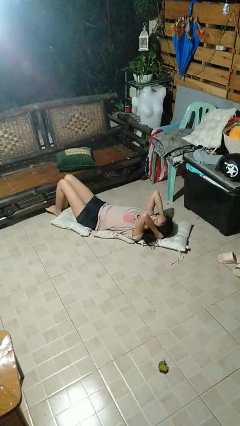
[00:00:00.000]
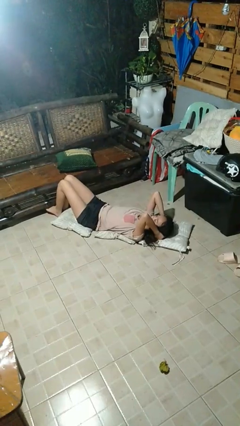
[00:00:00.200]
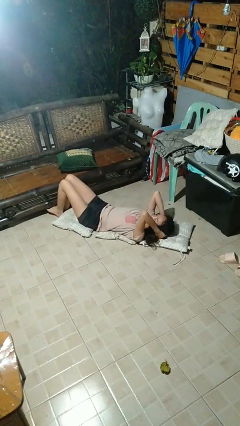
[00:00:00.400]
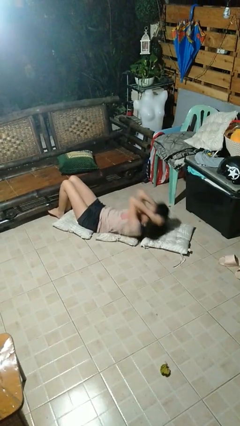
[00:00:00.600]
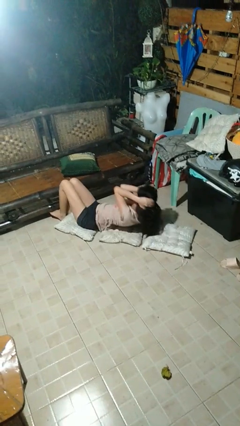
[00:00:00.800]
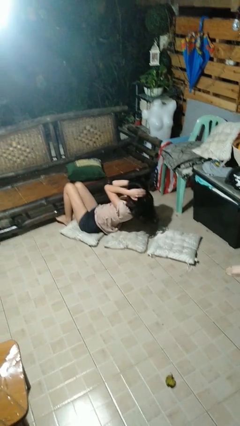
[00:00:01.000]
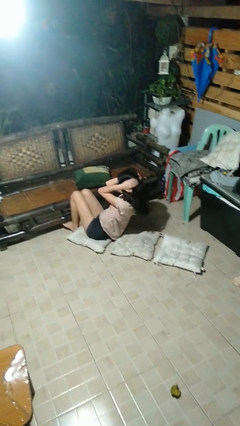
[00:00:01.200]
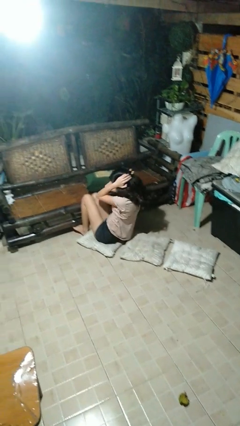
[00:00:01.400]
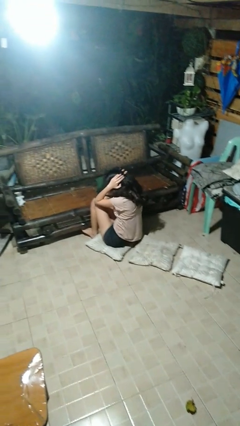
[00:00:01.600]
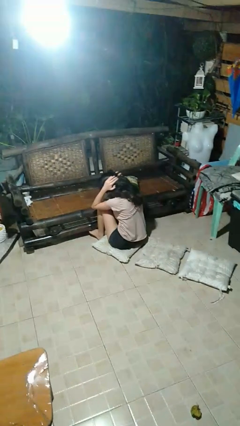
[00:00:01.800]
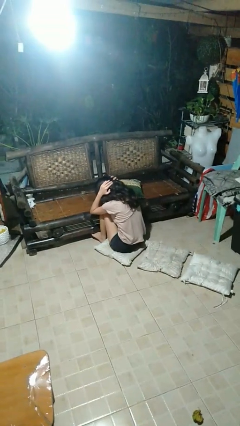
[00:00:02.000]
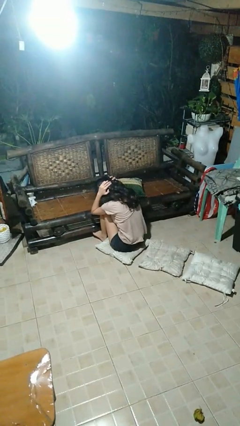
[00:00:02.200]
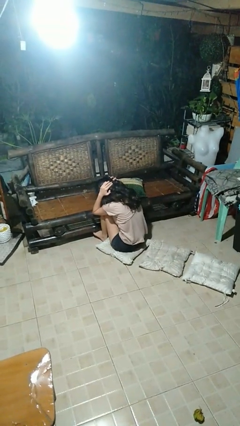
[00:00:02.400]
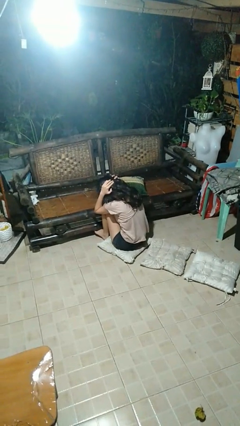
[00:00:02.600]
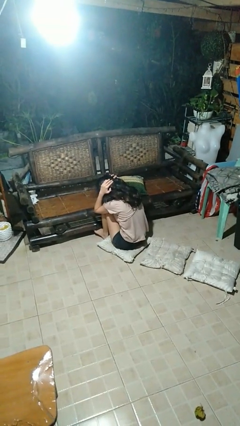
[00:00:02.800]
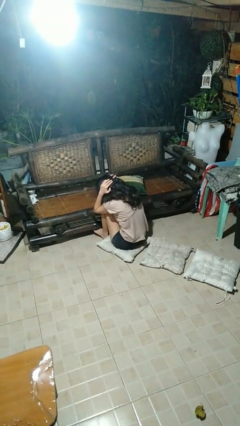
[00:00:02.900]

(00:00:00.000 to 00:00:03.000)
person exercises with situp

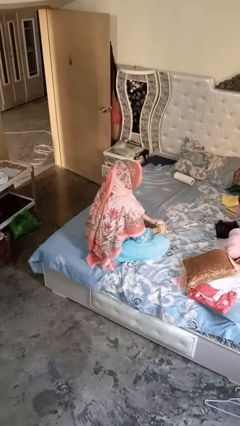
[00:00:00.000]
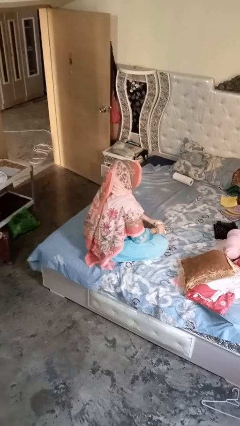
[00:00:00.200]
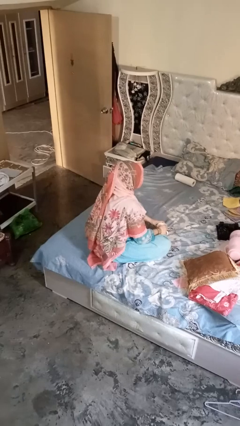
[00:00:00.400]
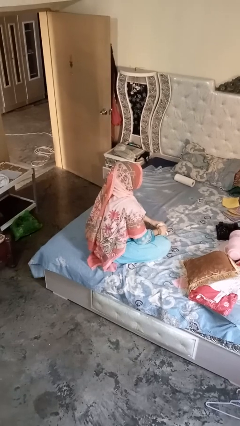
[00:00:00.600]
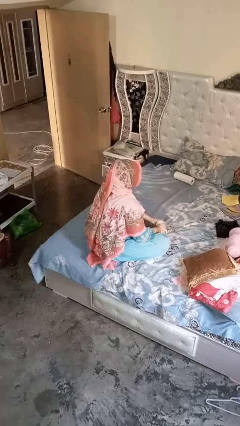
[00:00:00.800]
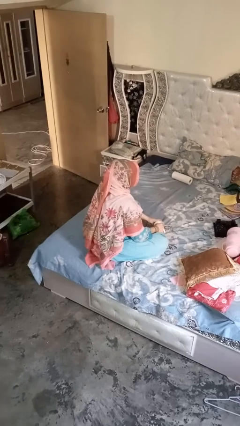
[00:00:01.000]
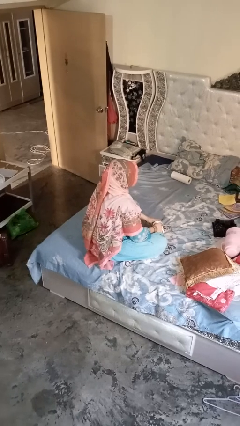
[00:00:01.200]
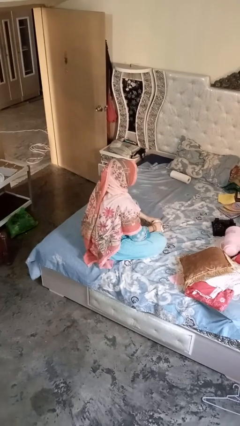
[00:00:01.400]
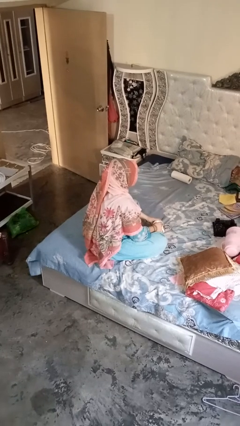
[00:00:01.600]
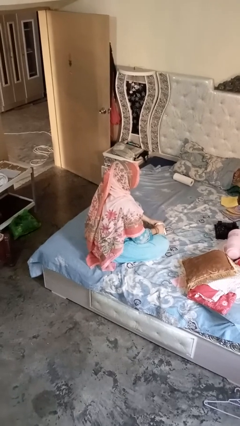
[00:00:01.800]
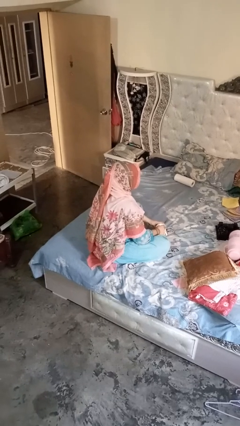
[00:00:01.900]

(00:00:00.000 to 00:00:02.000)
person stirs mug

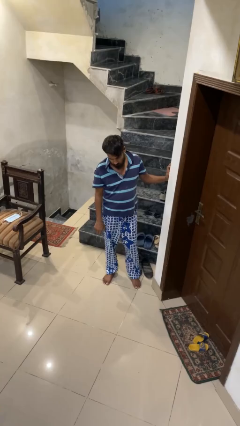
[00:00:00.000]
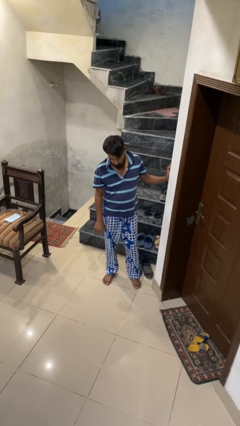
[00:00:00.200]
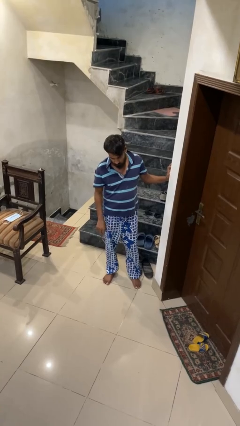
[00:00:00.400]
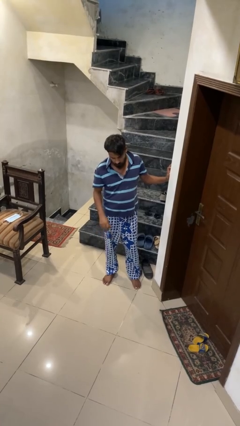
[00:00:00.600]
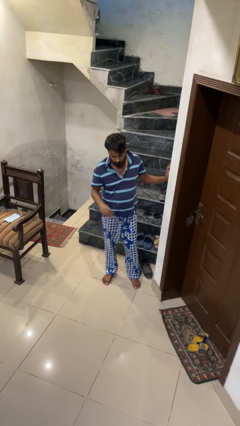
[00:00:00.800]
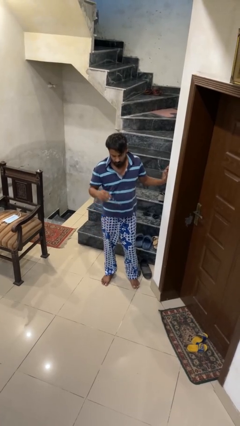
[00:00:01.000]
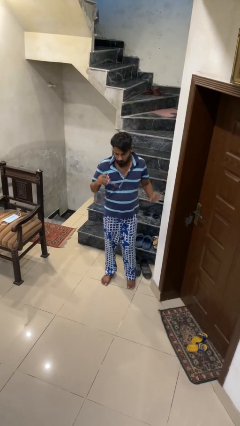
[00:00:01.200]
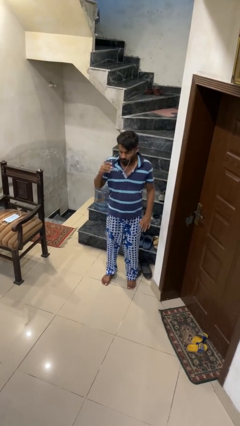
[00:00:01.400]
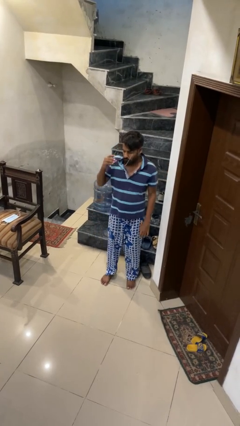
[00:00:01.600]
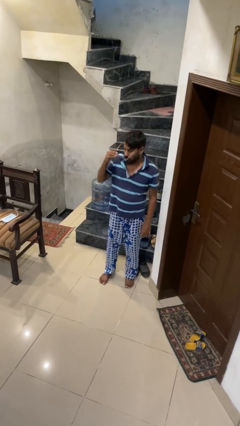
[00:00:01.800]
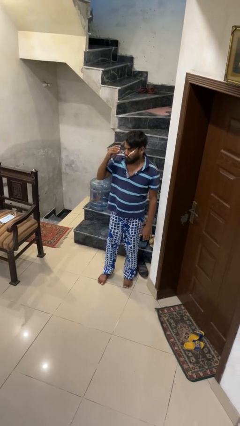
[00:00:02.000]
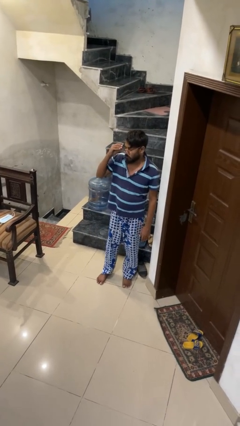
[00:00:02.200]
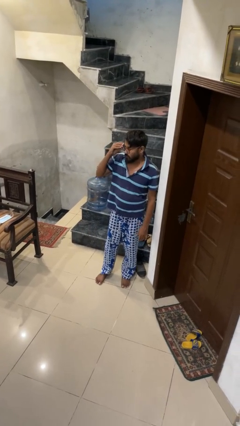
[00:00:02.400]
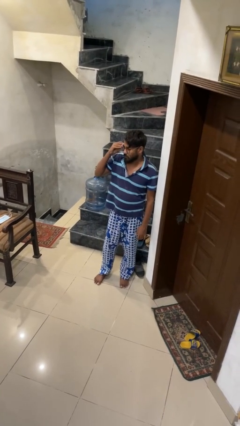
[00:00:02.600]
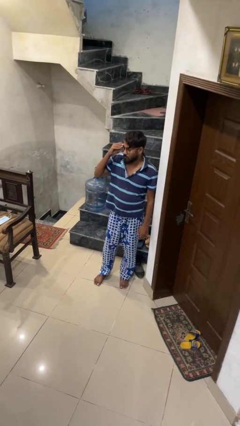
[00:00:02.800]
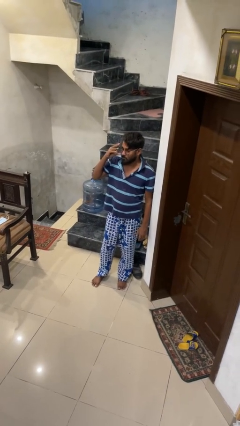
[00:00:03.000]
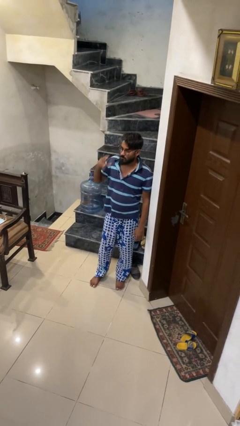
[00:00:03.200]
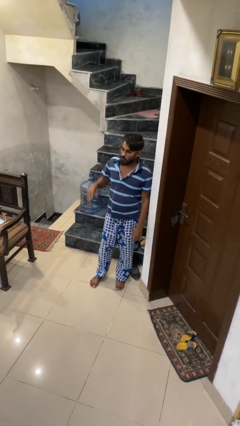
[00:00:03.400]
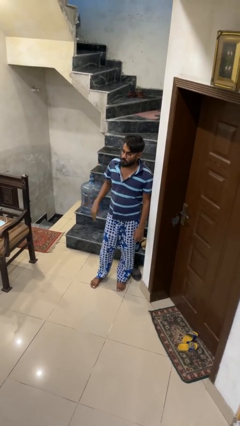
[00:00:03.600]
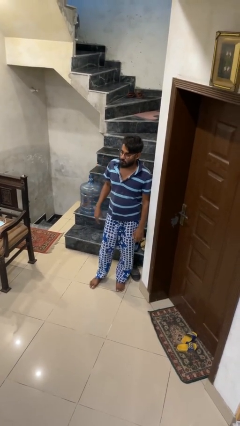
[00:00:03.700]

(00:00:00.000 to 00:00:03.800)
person puts on glasses

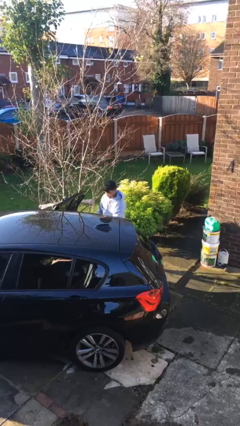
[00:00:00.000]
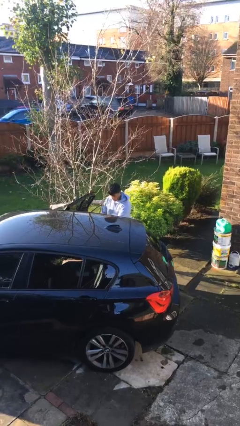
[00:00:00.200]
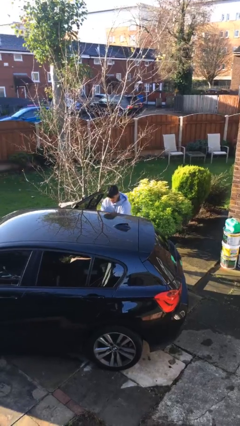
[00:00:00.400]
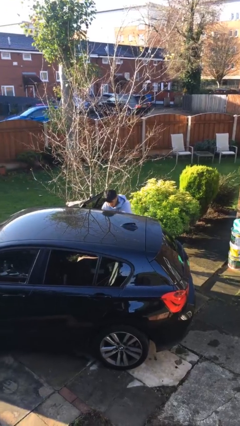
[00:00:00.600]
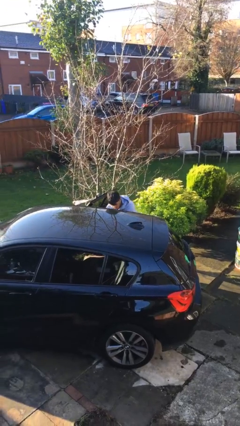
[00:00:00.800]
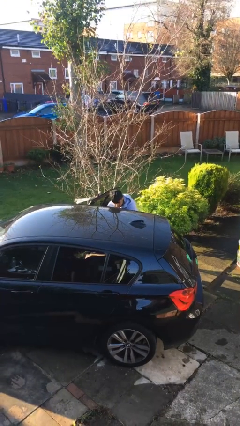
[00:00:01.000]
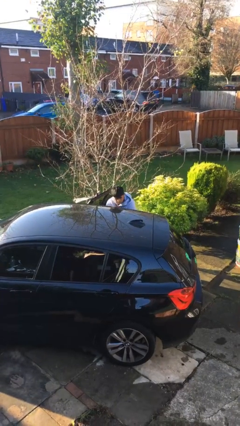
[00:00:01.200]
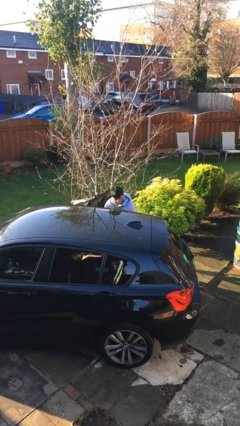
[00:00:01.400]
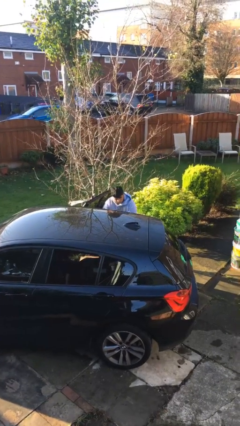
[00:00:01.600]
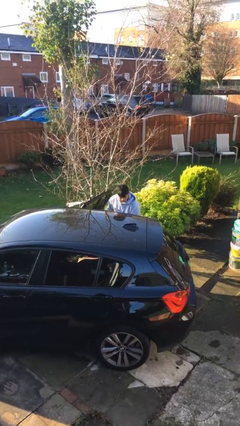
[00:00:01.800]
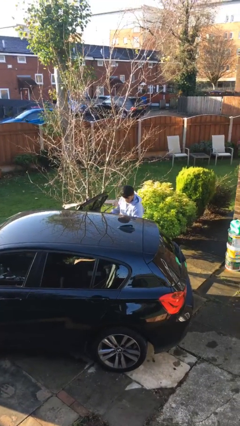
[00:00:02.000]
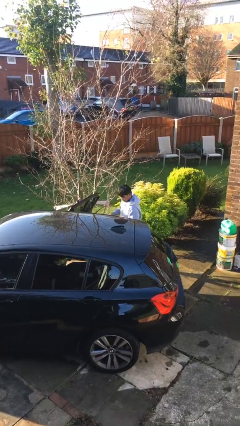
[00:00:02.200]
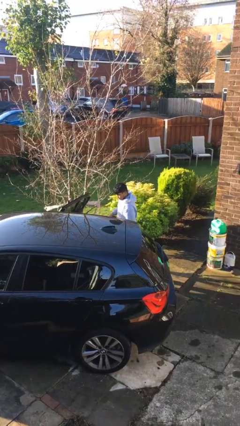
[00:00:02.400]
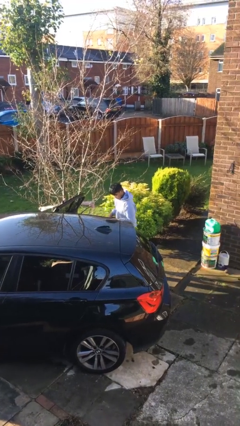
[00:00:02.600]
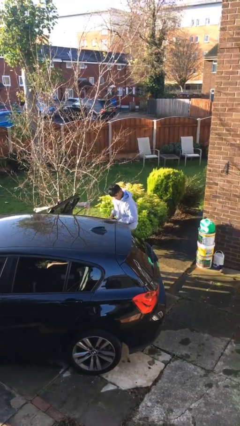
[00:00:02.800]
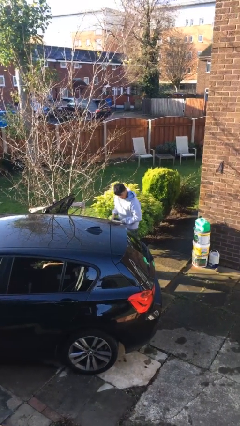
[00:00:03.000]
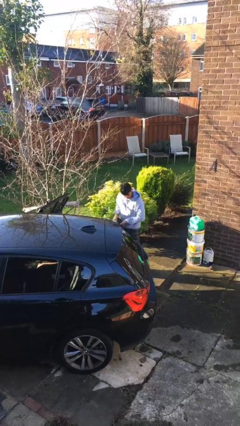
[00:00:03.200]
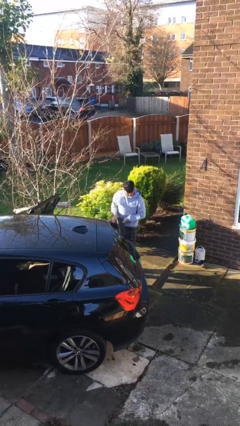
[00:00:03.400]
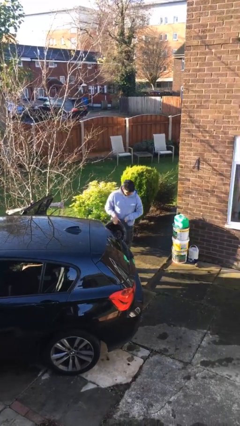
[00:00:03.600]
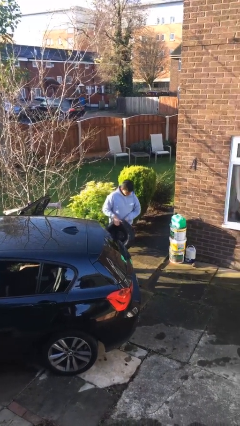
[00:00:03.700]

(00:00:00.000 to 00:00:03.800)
person unloads car

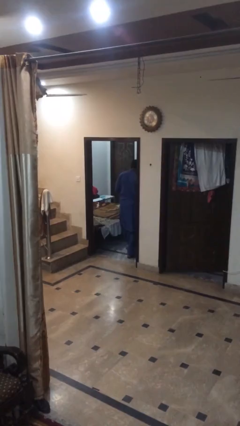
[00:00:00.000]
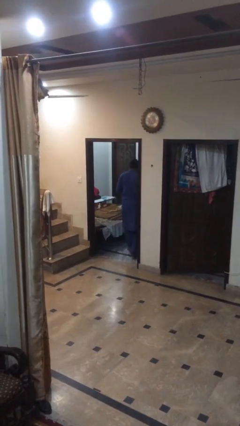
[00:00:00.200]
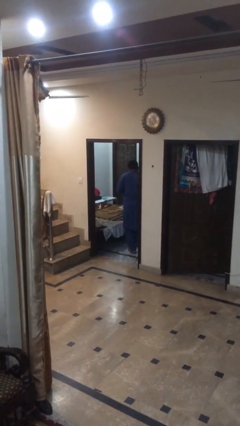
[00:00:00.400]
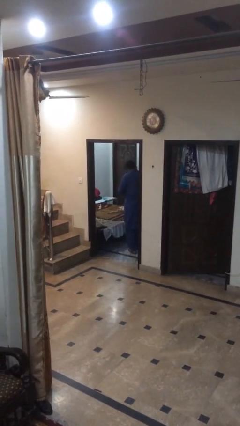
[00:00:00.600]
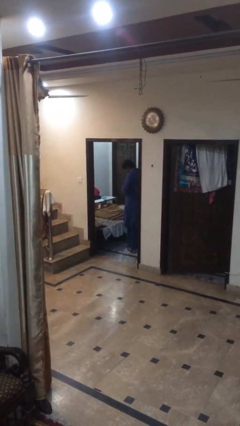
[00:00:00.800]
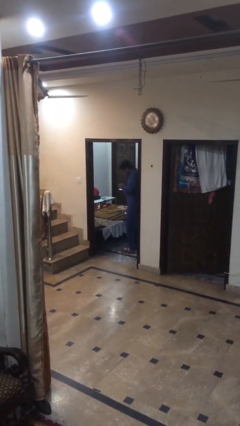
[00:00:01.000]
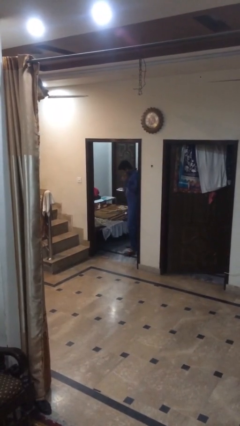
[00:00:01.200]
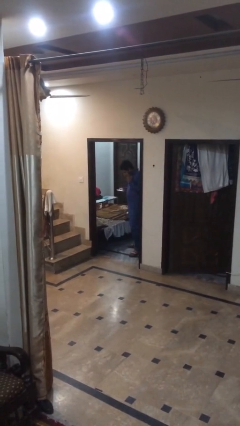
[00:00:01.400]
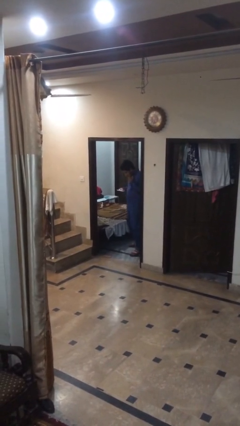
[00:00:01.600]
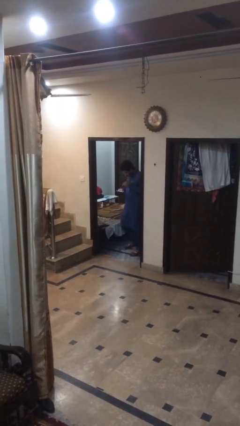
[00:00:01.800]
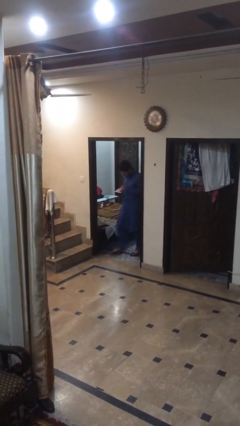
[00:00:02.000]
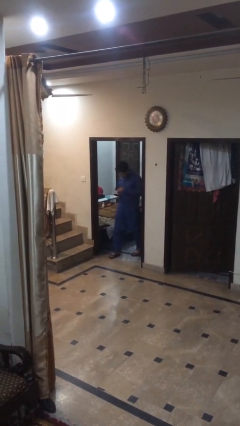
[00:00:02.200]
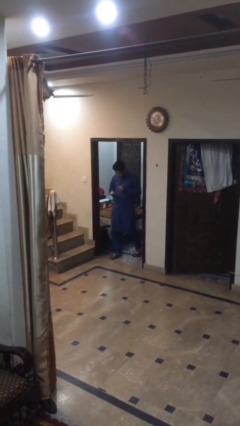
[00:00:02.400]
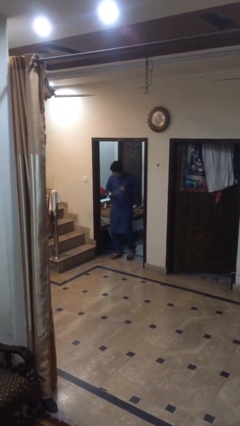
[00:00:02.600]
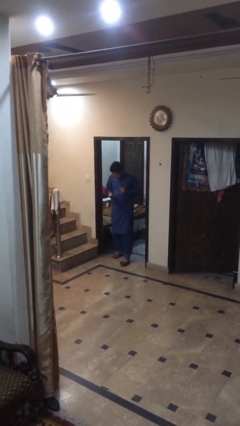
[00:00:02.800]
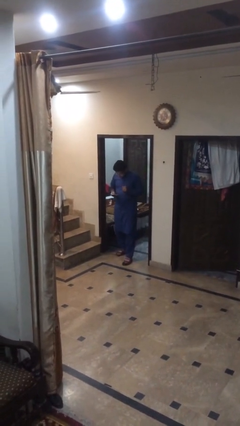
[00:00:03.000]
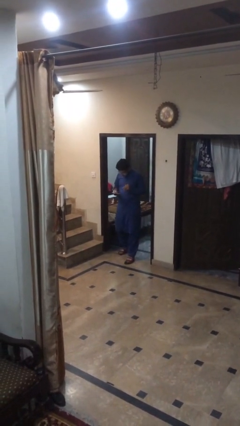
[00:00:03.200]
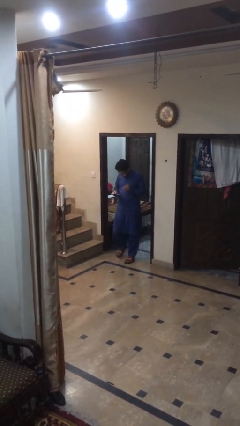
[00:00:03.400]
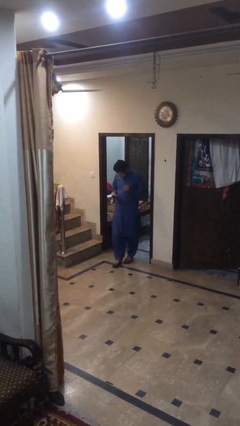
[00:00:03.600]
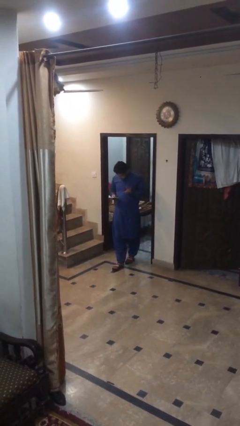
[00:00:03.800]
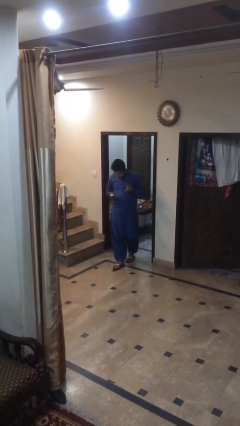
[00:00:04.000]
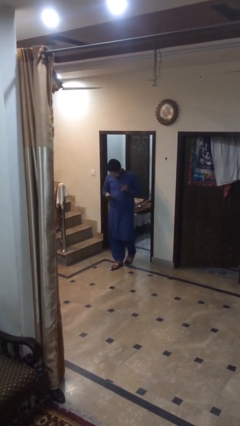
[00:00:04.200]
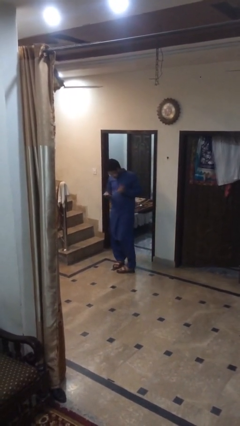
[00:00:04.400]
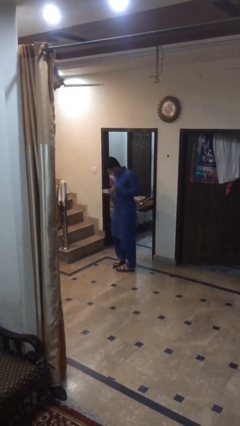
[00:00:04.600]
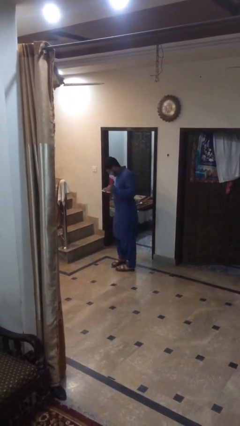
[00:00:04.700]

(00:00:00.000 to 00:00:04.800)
person exits scene through structure
